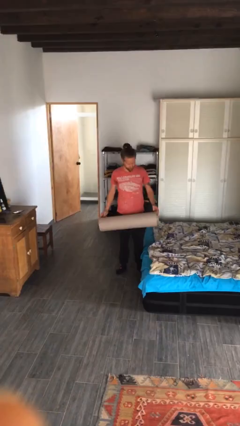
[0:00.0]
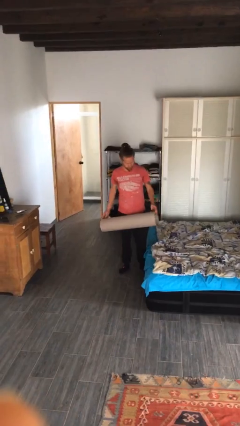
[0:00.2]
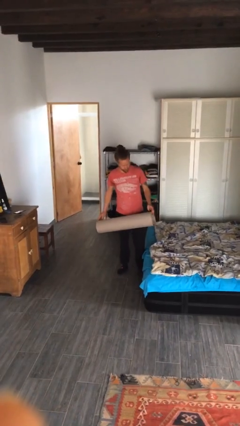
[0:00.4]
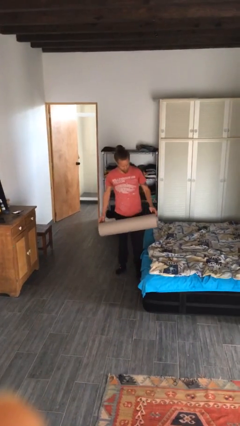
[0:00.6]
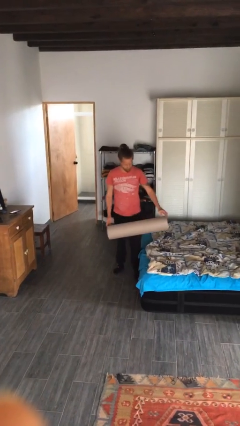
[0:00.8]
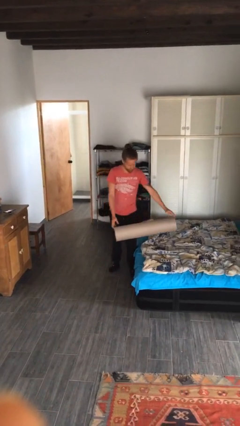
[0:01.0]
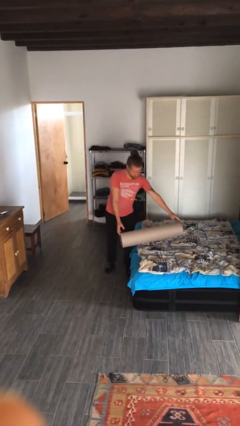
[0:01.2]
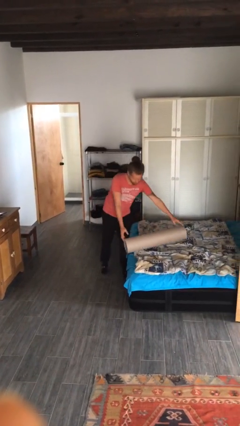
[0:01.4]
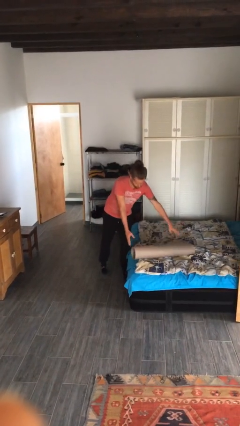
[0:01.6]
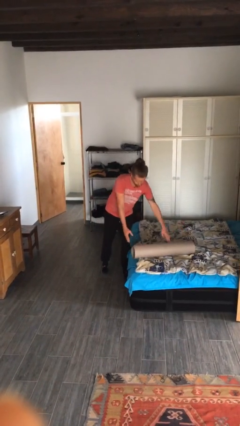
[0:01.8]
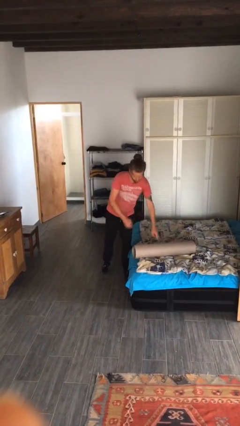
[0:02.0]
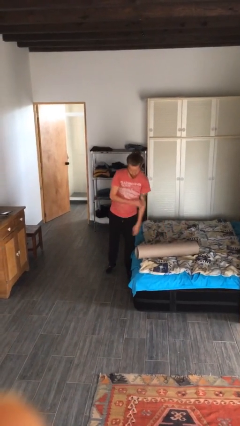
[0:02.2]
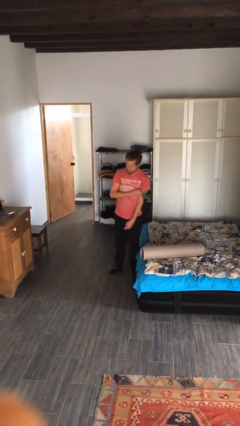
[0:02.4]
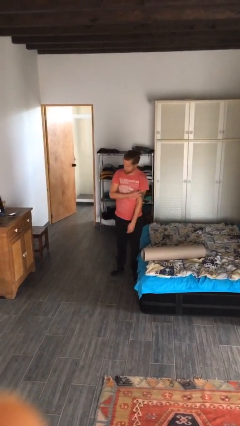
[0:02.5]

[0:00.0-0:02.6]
person puts down object on bed

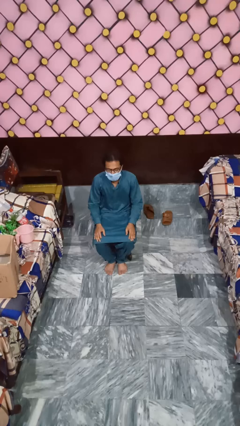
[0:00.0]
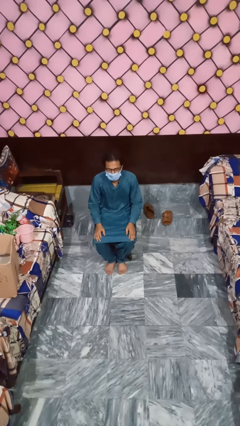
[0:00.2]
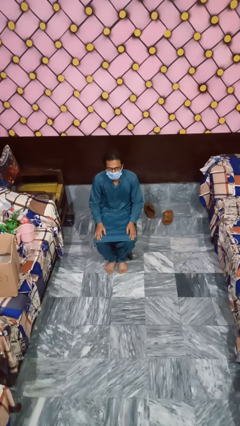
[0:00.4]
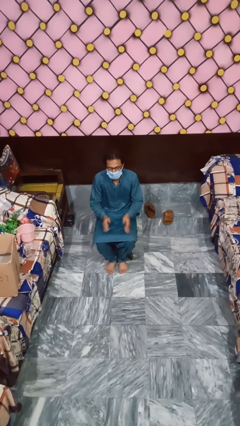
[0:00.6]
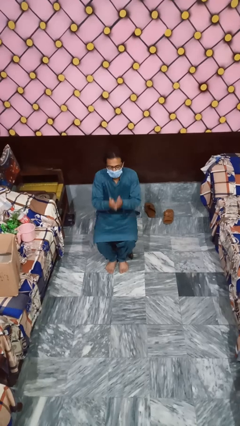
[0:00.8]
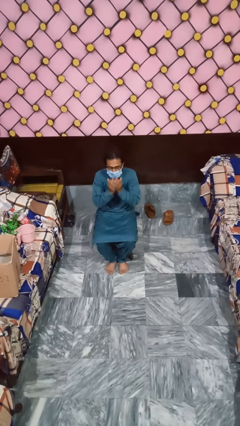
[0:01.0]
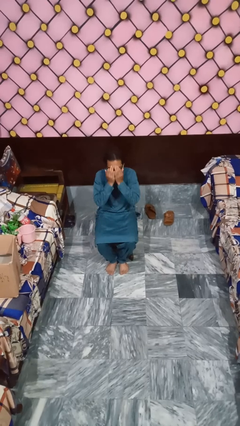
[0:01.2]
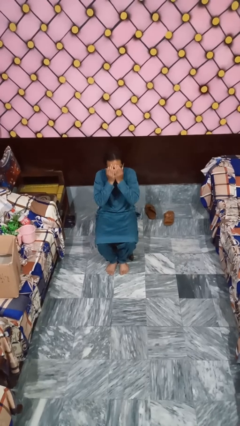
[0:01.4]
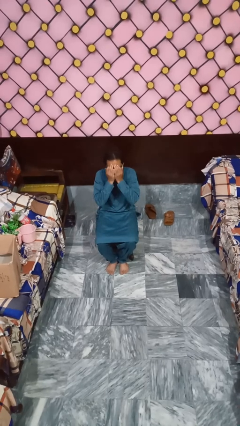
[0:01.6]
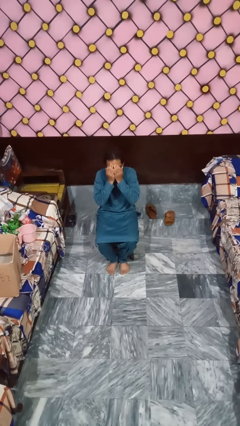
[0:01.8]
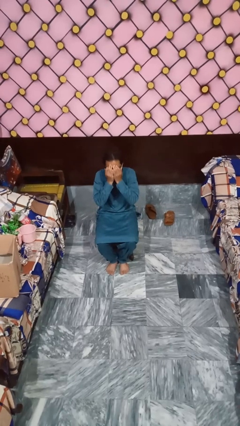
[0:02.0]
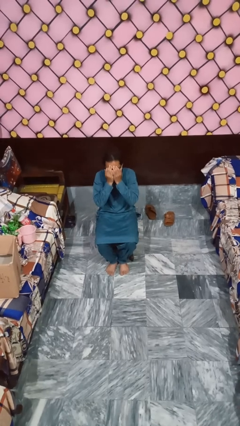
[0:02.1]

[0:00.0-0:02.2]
person covers face with hands

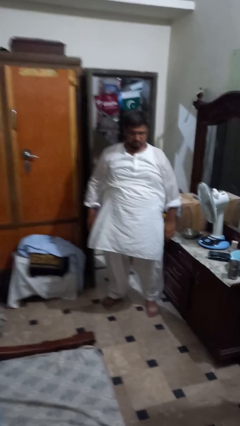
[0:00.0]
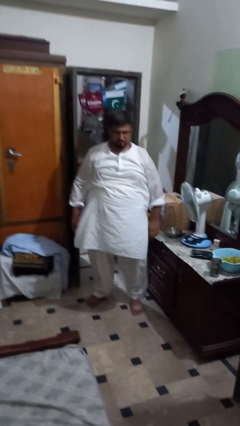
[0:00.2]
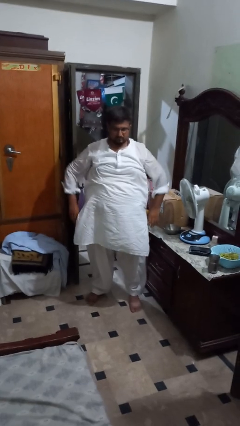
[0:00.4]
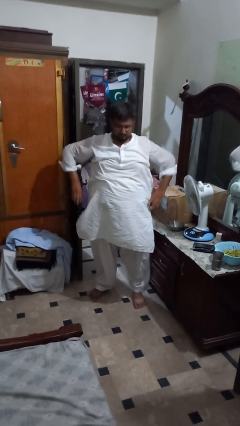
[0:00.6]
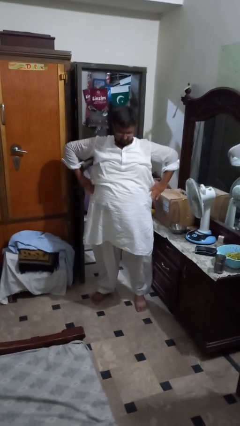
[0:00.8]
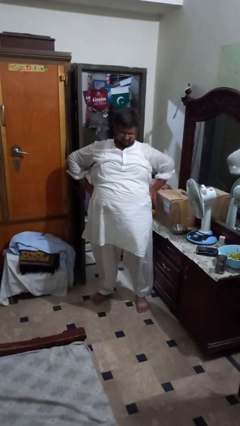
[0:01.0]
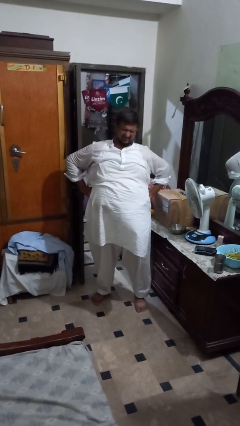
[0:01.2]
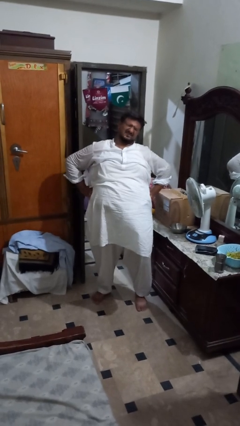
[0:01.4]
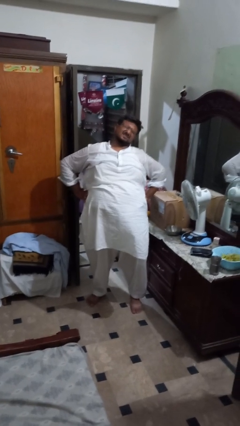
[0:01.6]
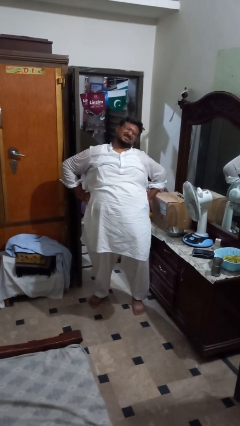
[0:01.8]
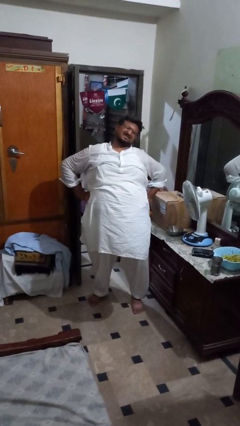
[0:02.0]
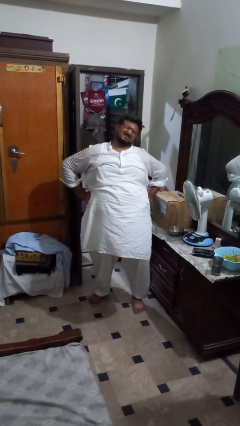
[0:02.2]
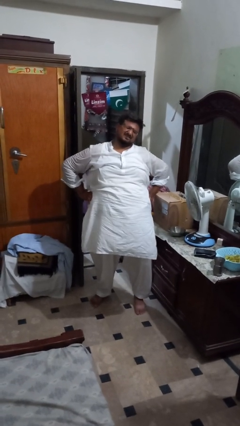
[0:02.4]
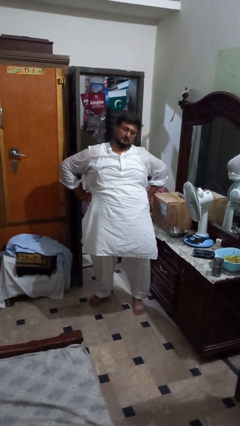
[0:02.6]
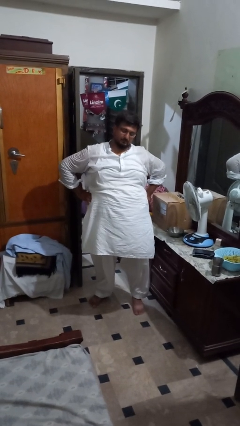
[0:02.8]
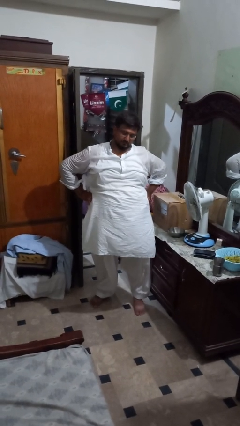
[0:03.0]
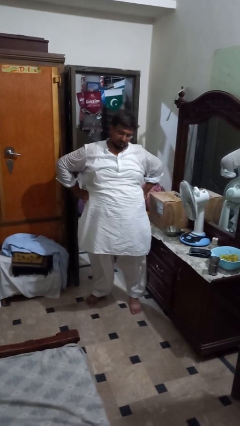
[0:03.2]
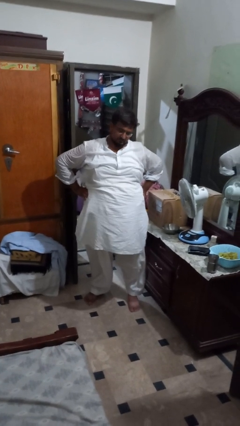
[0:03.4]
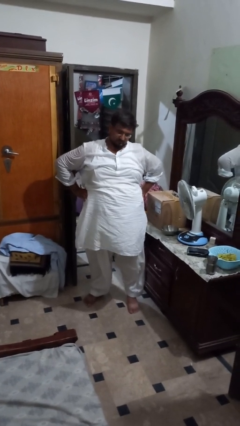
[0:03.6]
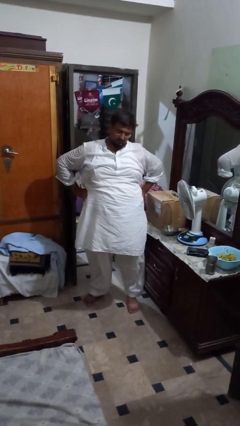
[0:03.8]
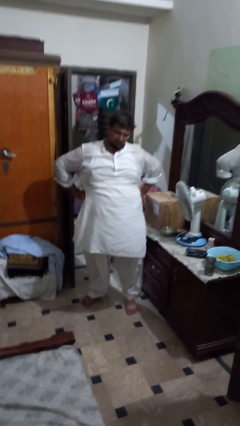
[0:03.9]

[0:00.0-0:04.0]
person stretches back

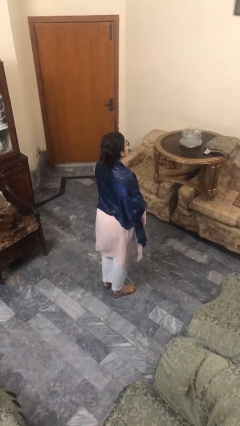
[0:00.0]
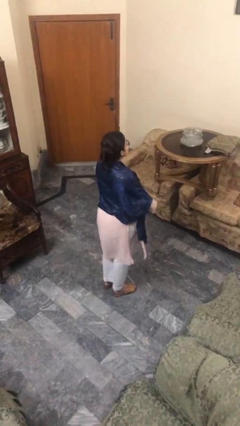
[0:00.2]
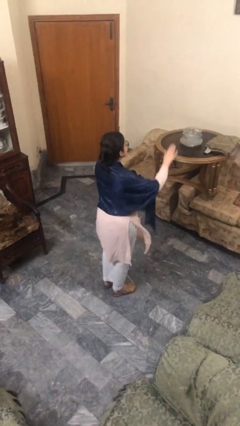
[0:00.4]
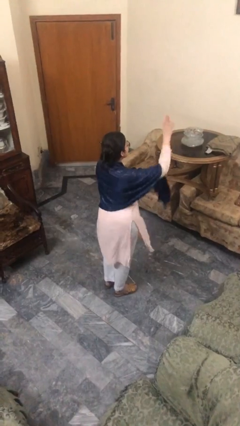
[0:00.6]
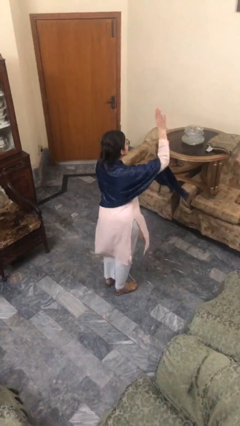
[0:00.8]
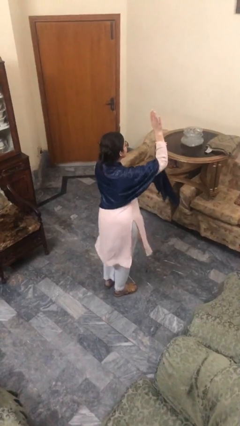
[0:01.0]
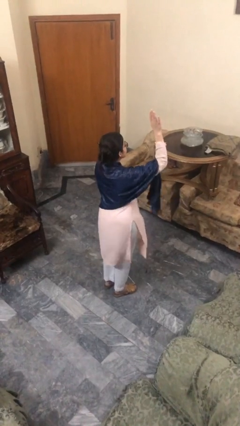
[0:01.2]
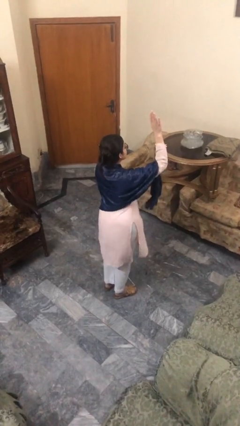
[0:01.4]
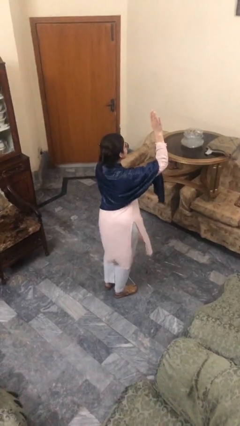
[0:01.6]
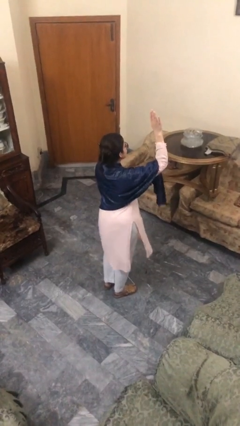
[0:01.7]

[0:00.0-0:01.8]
person gestures raise hand

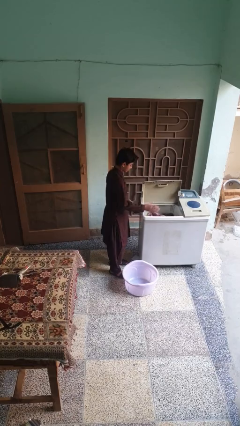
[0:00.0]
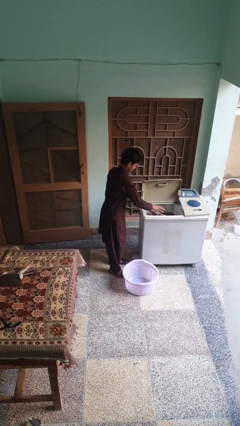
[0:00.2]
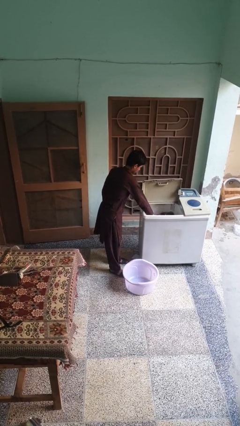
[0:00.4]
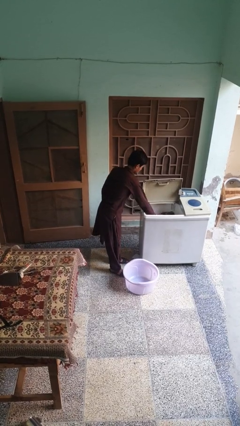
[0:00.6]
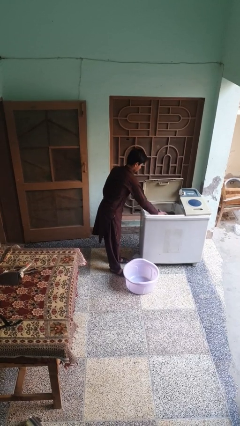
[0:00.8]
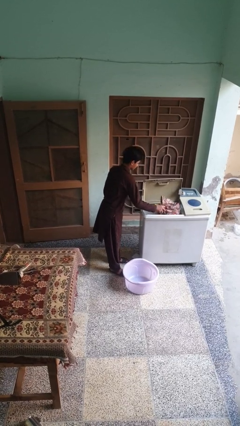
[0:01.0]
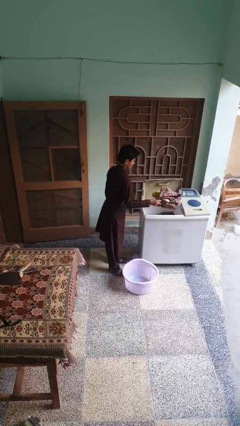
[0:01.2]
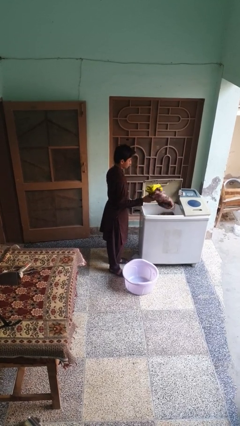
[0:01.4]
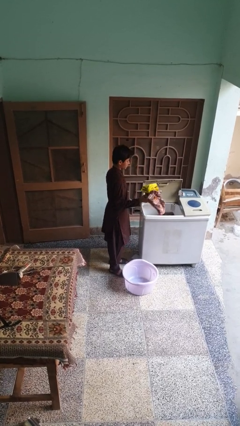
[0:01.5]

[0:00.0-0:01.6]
person loads clotheswasher

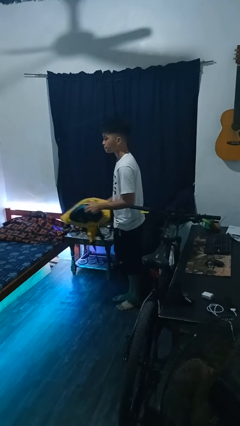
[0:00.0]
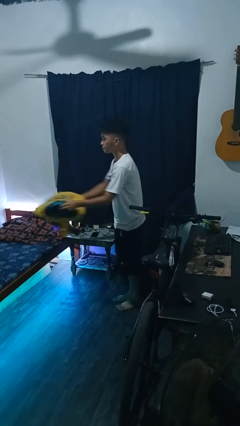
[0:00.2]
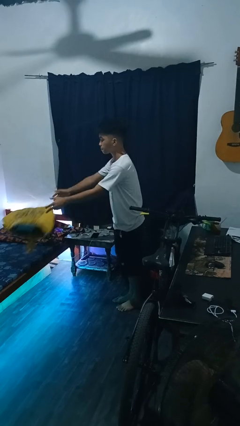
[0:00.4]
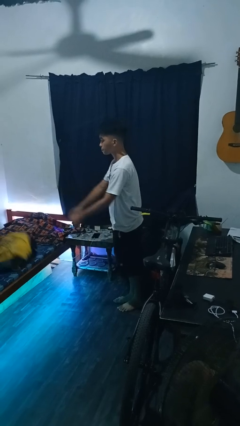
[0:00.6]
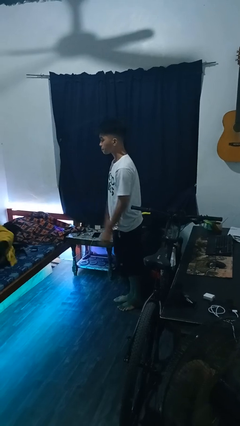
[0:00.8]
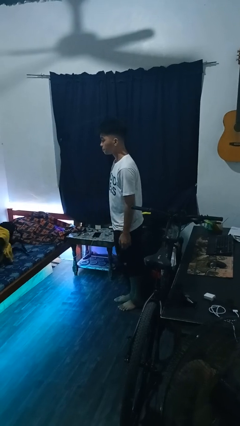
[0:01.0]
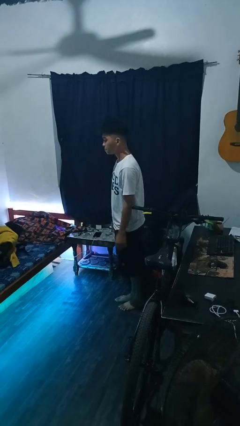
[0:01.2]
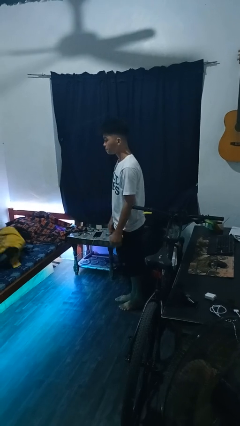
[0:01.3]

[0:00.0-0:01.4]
person throws object on bed

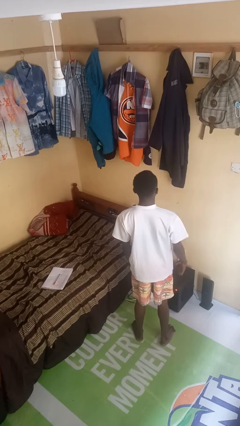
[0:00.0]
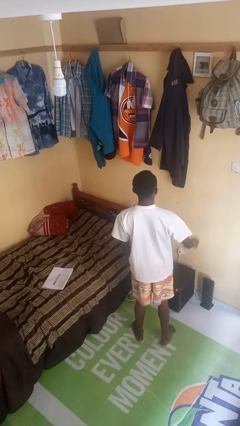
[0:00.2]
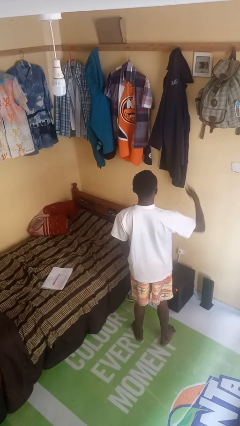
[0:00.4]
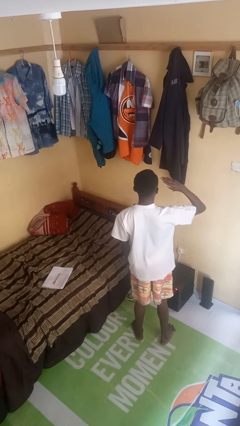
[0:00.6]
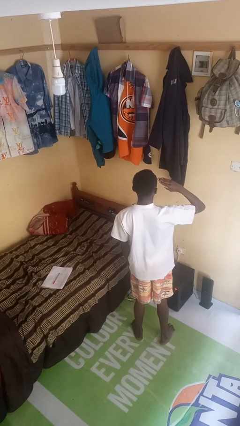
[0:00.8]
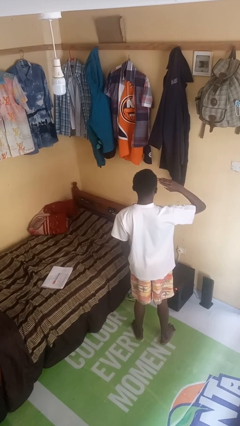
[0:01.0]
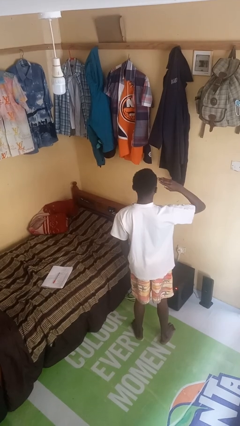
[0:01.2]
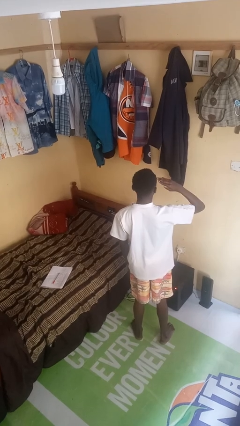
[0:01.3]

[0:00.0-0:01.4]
person salutes

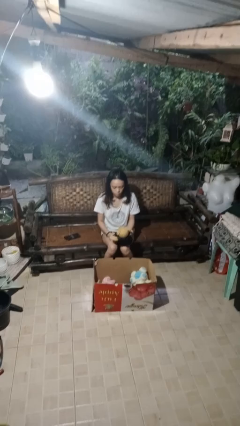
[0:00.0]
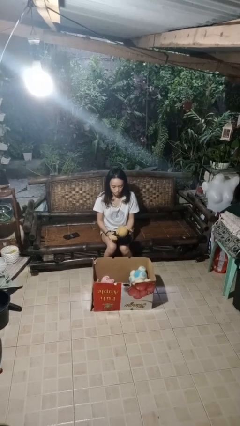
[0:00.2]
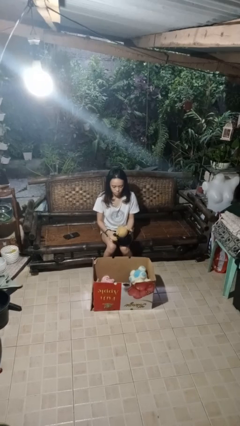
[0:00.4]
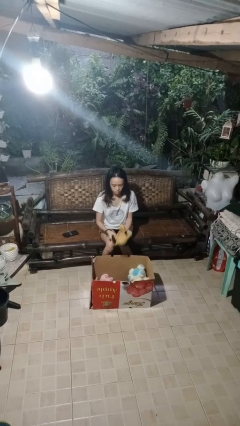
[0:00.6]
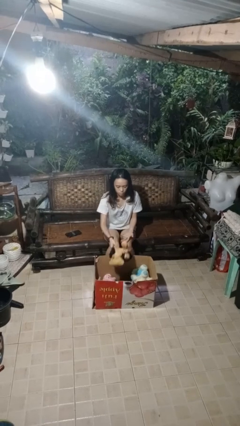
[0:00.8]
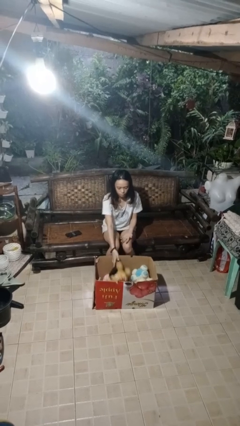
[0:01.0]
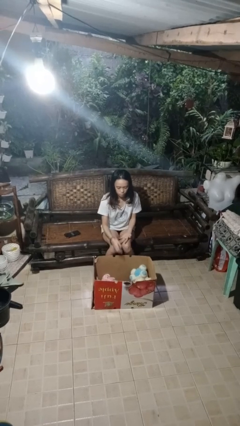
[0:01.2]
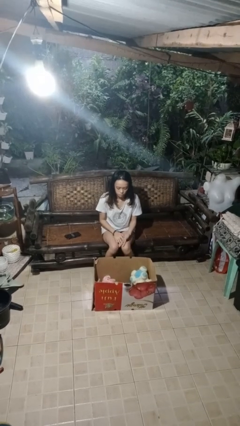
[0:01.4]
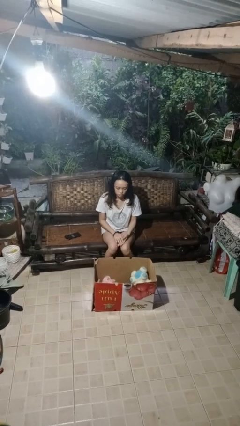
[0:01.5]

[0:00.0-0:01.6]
person puts object into box
